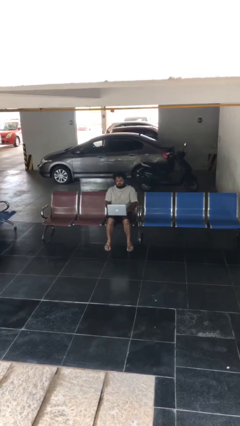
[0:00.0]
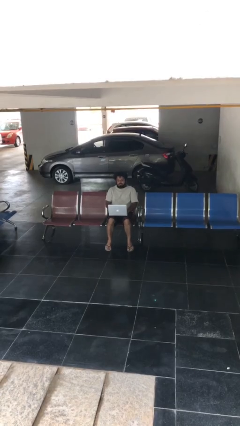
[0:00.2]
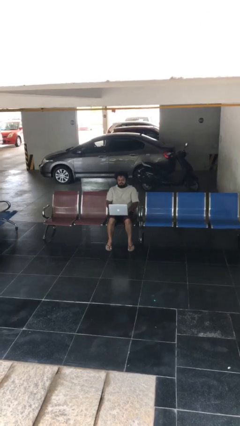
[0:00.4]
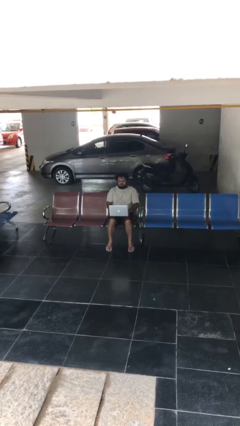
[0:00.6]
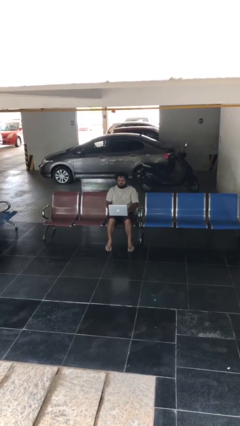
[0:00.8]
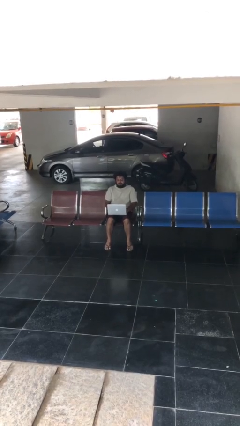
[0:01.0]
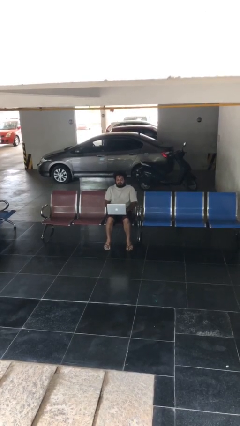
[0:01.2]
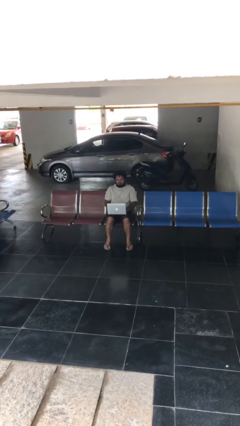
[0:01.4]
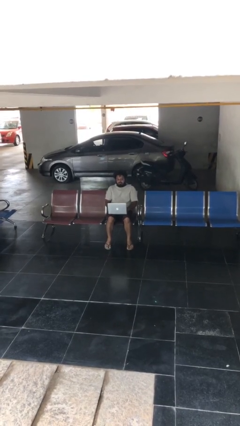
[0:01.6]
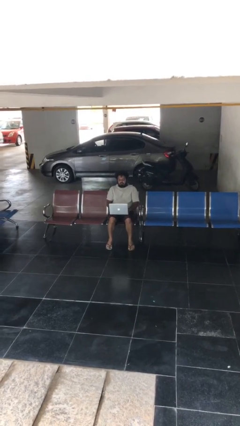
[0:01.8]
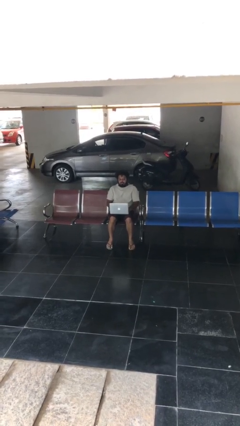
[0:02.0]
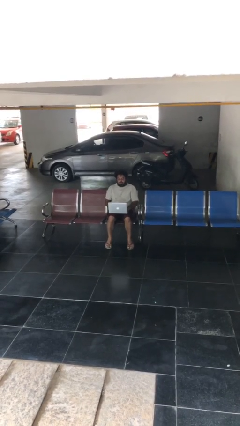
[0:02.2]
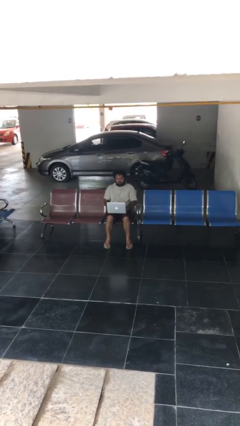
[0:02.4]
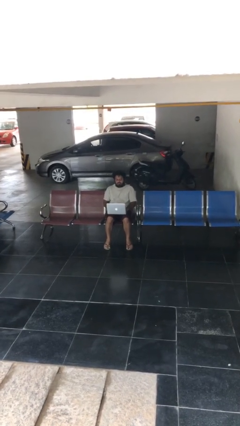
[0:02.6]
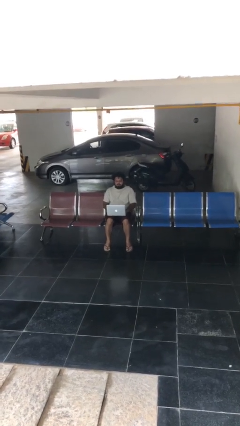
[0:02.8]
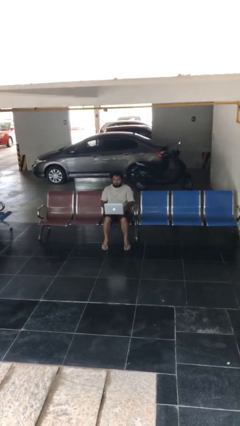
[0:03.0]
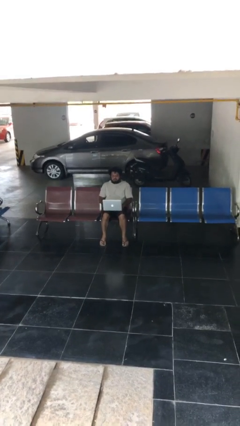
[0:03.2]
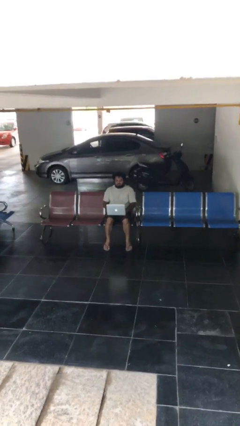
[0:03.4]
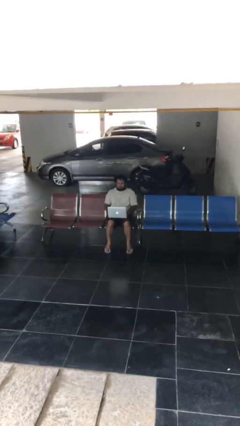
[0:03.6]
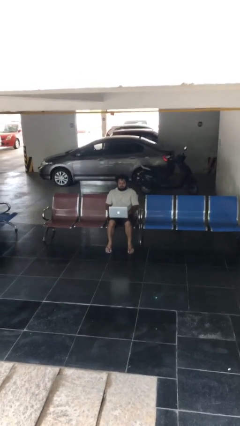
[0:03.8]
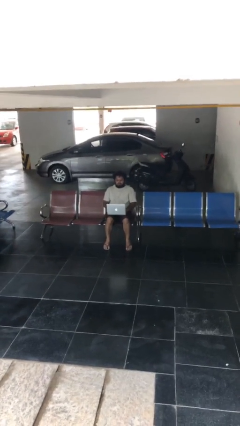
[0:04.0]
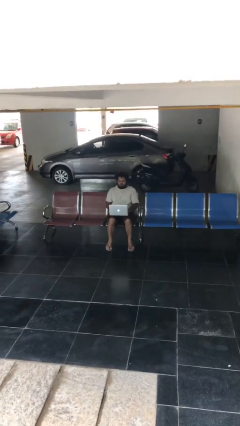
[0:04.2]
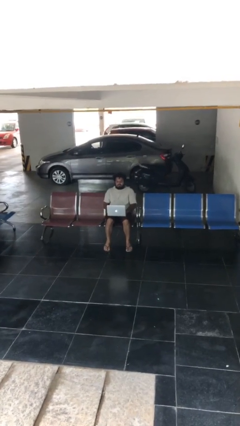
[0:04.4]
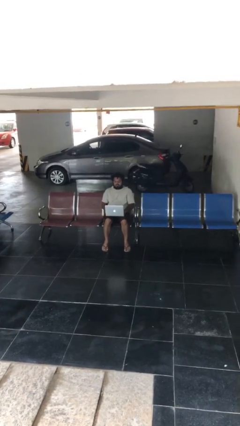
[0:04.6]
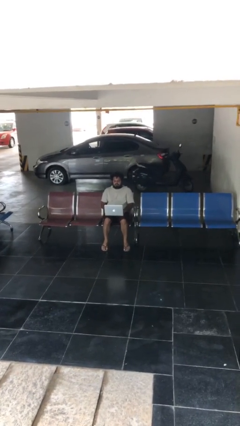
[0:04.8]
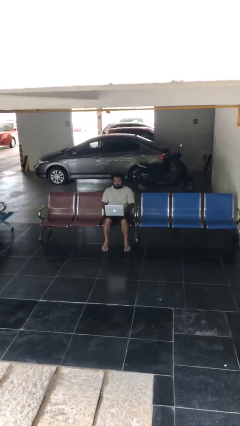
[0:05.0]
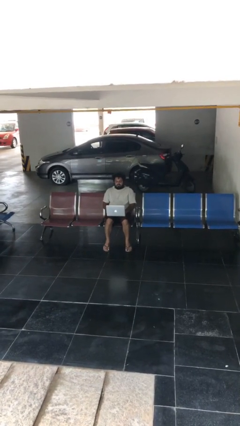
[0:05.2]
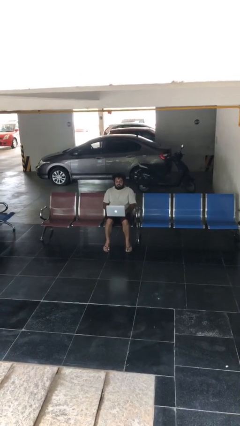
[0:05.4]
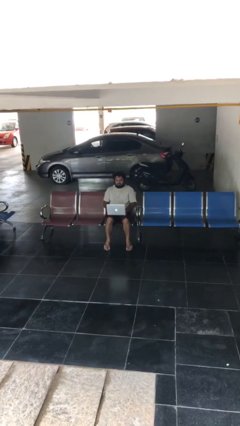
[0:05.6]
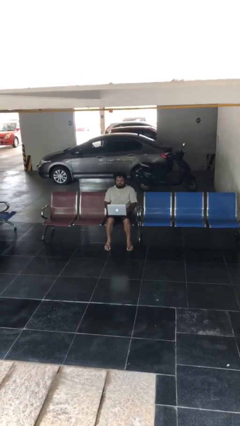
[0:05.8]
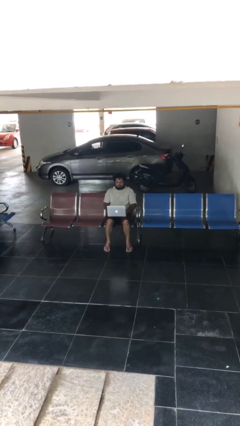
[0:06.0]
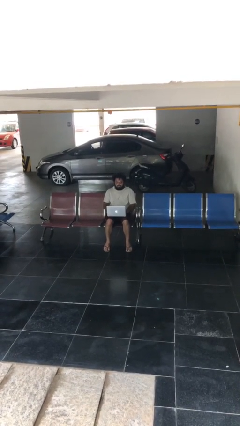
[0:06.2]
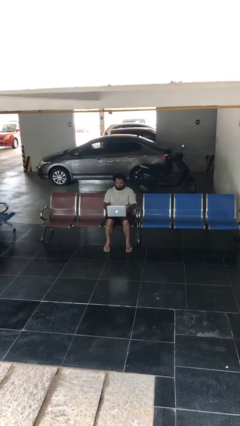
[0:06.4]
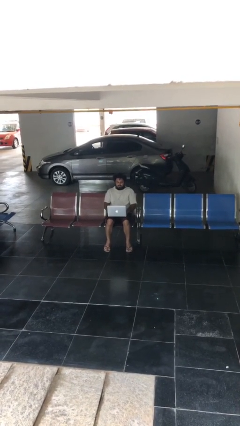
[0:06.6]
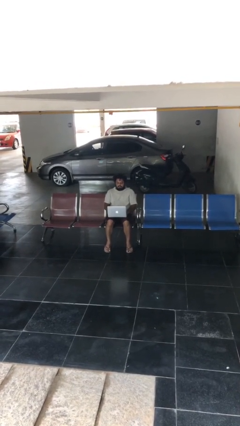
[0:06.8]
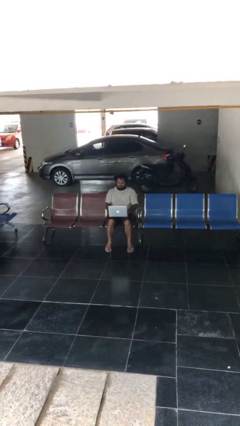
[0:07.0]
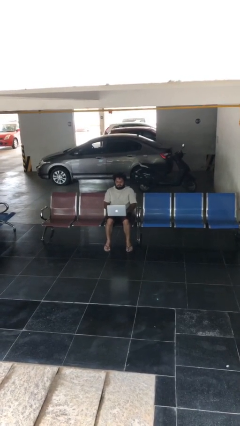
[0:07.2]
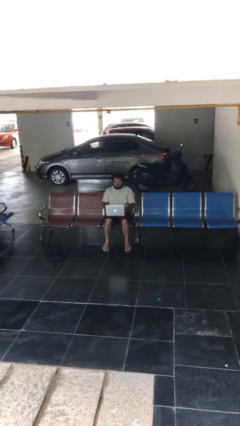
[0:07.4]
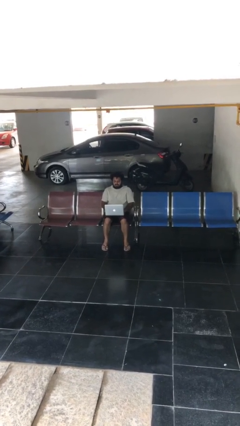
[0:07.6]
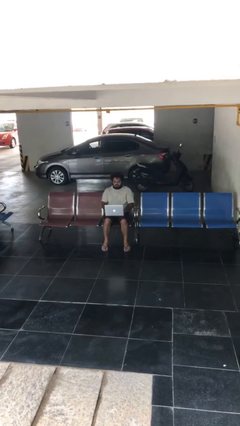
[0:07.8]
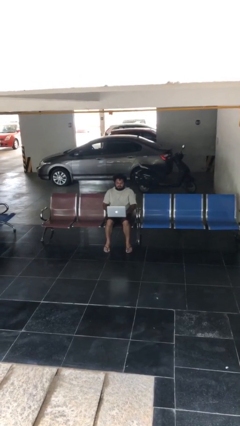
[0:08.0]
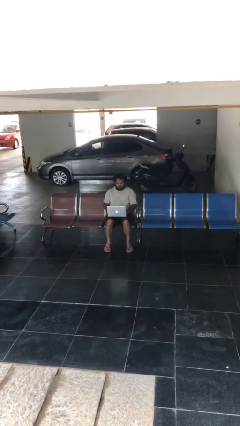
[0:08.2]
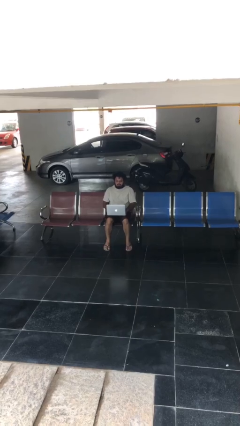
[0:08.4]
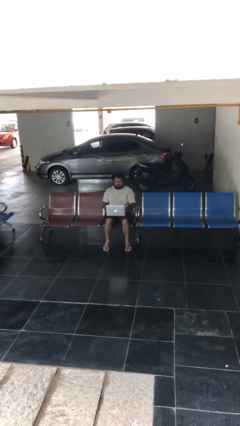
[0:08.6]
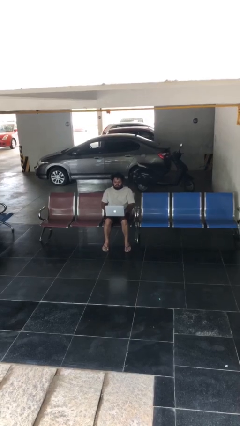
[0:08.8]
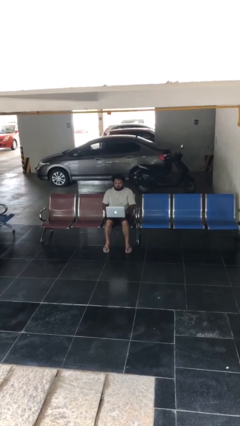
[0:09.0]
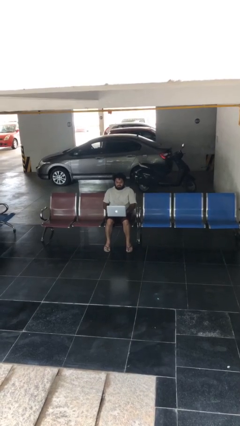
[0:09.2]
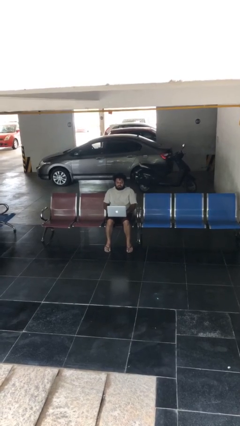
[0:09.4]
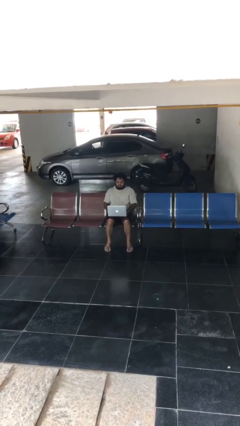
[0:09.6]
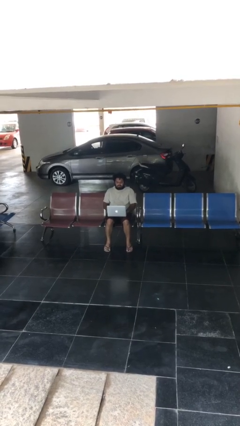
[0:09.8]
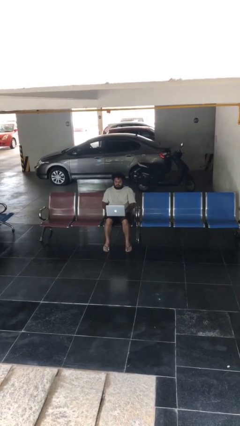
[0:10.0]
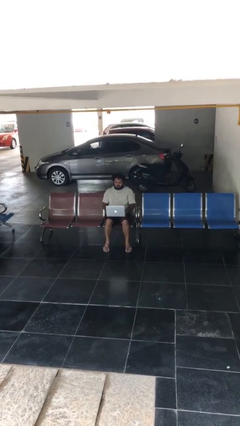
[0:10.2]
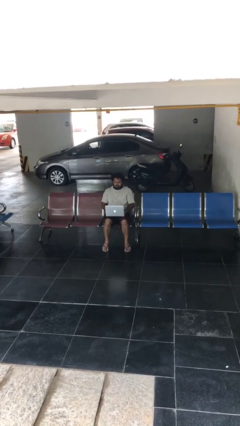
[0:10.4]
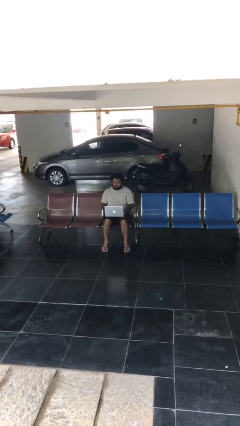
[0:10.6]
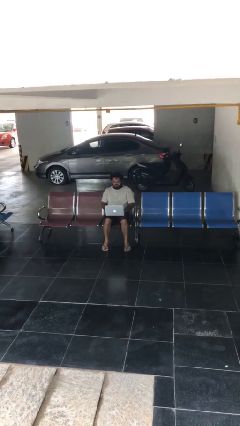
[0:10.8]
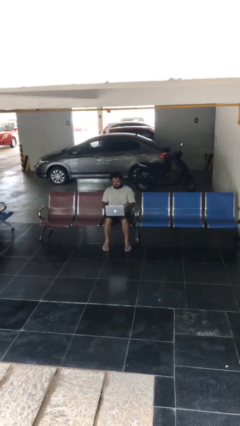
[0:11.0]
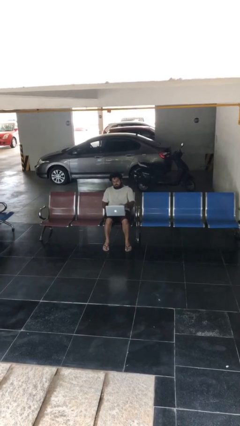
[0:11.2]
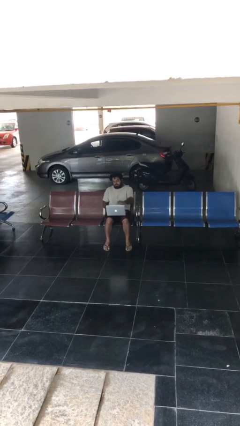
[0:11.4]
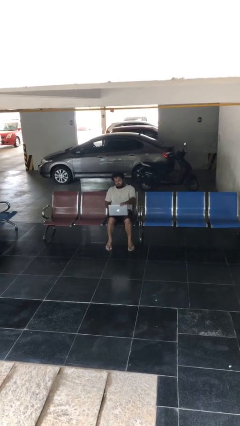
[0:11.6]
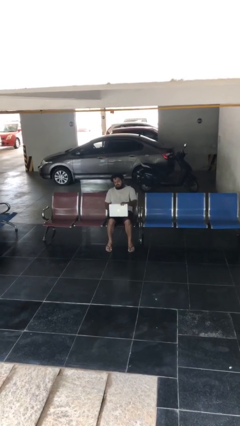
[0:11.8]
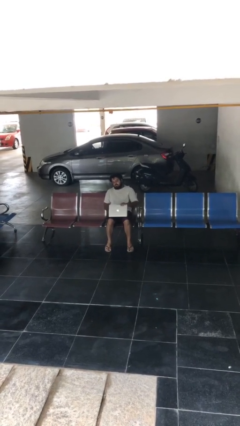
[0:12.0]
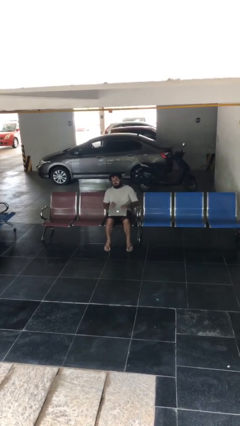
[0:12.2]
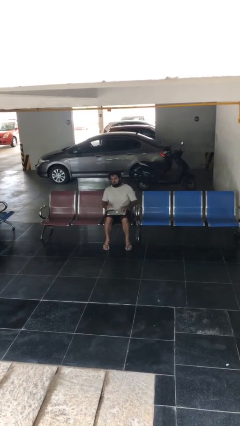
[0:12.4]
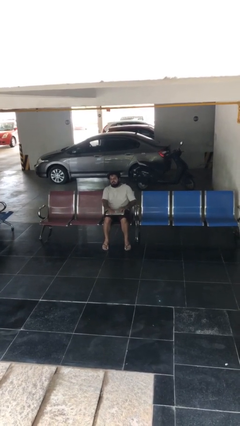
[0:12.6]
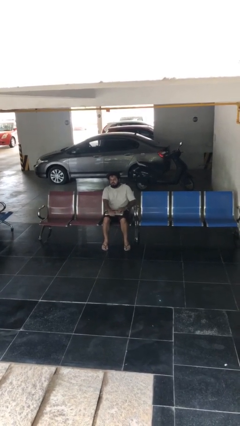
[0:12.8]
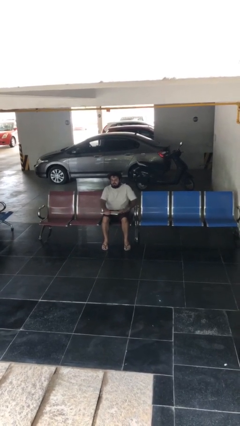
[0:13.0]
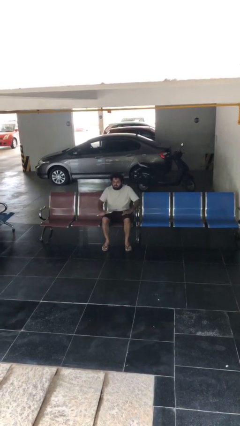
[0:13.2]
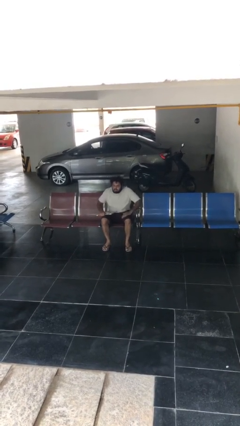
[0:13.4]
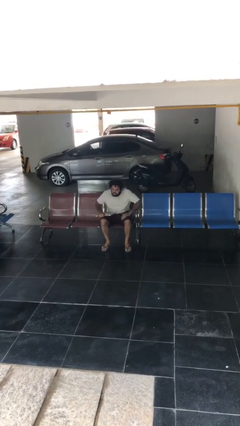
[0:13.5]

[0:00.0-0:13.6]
person interacts with laptop

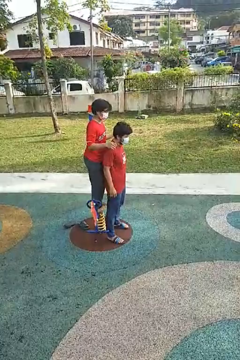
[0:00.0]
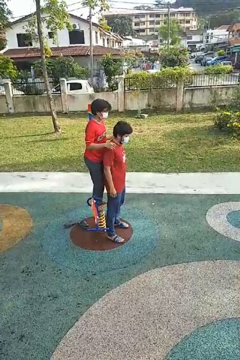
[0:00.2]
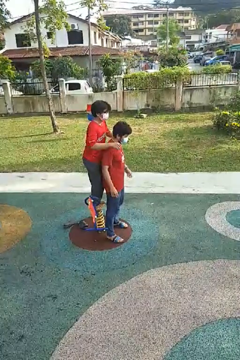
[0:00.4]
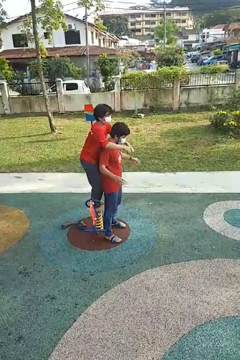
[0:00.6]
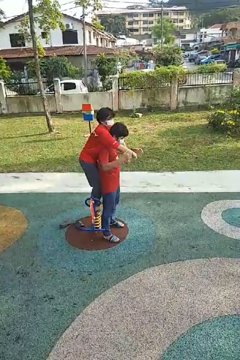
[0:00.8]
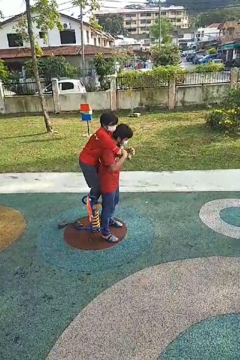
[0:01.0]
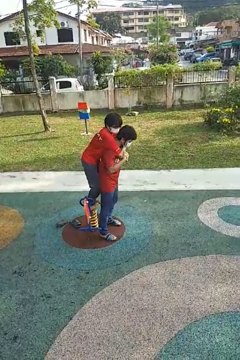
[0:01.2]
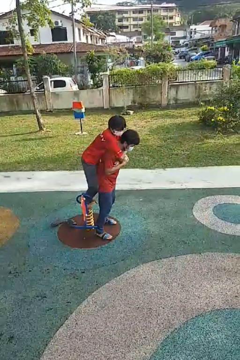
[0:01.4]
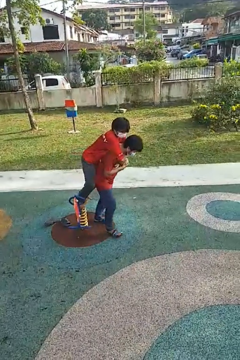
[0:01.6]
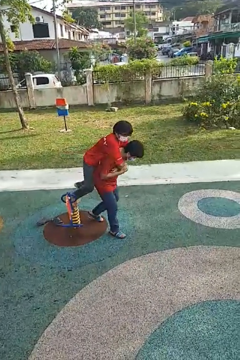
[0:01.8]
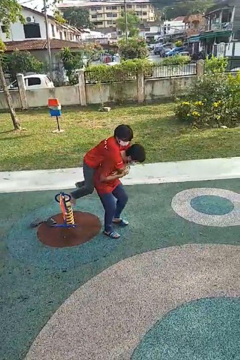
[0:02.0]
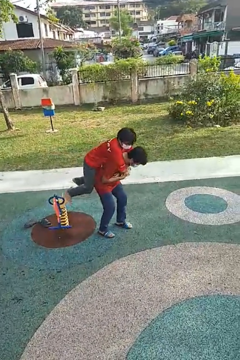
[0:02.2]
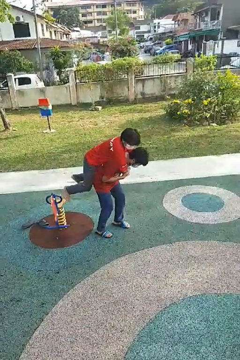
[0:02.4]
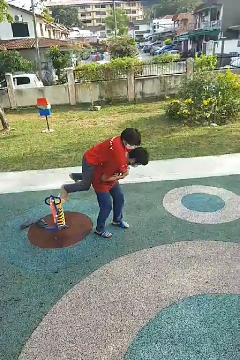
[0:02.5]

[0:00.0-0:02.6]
person carries person over shoulder

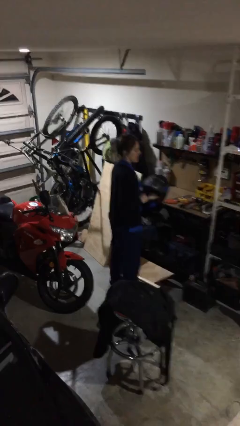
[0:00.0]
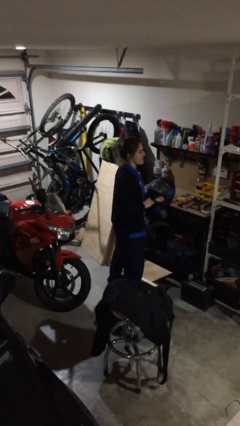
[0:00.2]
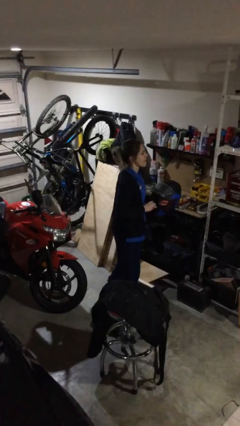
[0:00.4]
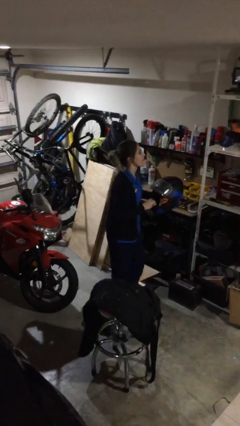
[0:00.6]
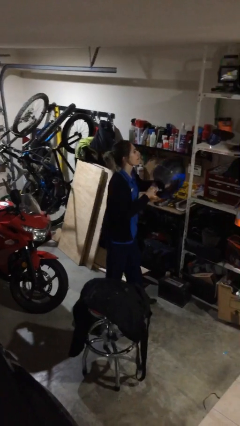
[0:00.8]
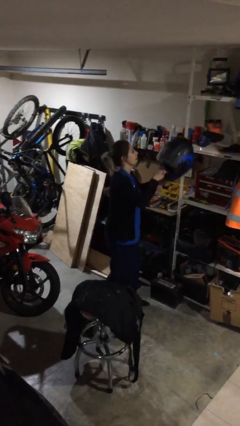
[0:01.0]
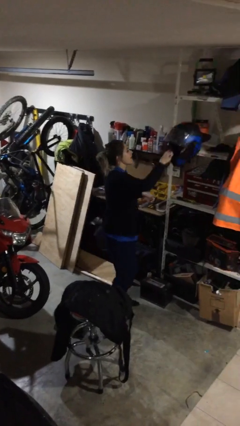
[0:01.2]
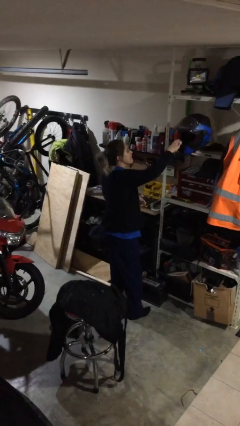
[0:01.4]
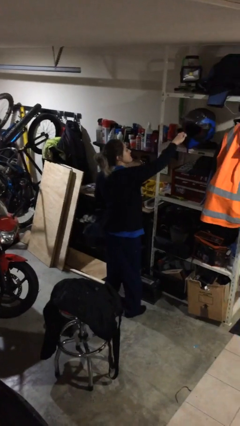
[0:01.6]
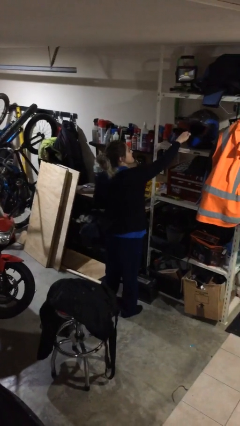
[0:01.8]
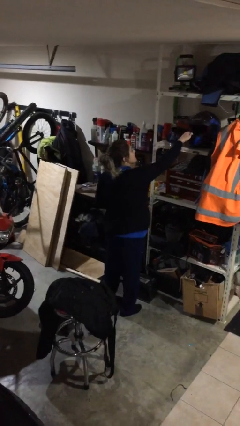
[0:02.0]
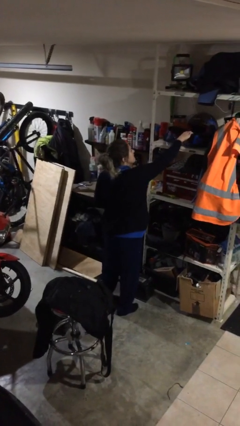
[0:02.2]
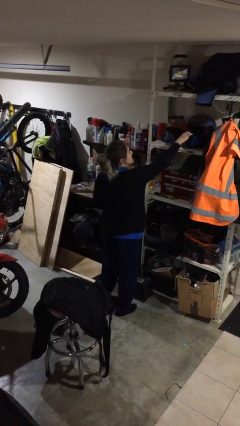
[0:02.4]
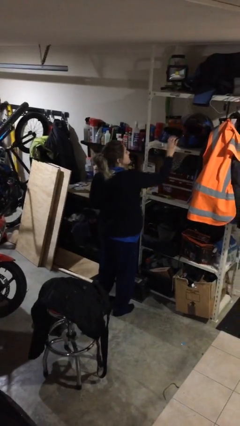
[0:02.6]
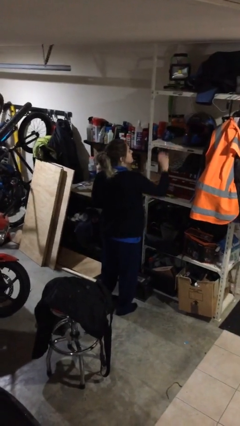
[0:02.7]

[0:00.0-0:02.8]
person puts down object on shelf
